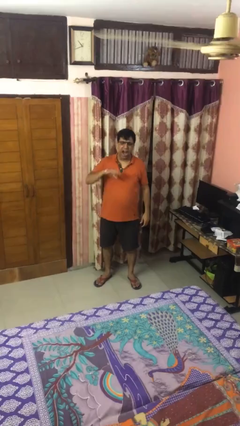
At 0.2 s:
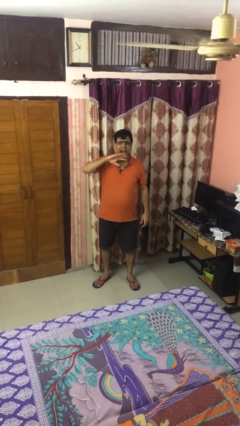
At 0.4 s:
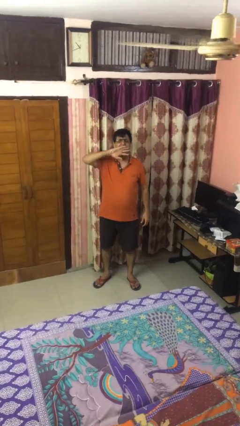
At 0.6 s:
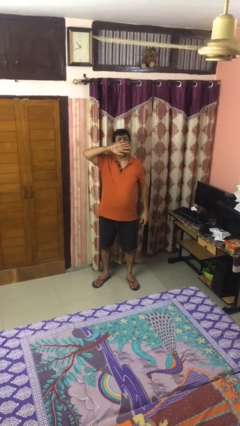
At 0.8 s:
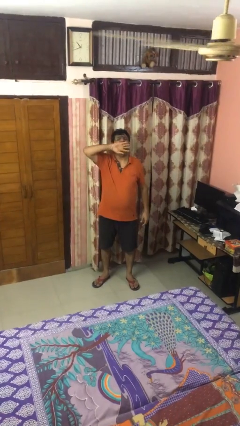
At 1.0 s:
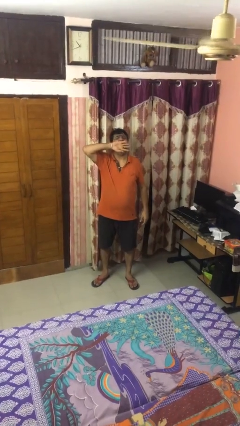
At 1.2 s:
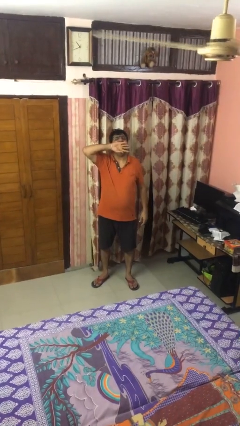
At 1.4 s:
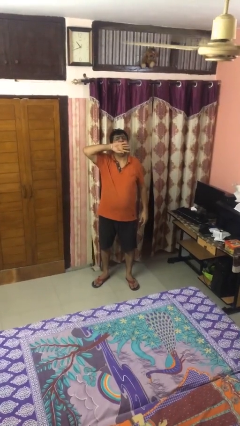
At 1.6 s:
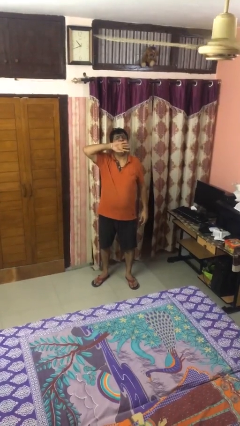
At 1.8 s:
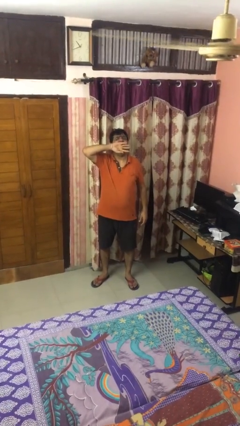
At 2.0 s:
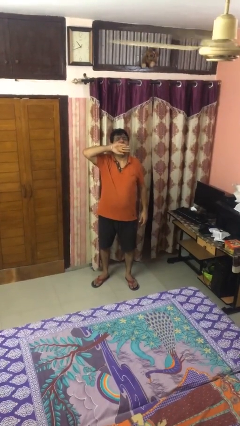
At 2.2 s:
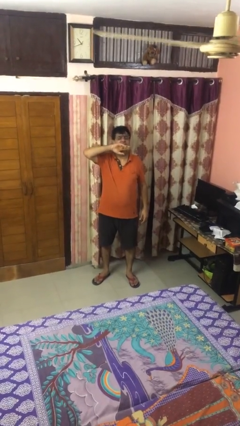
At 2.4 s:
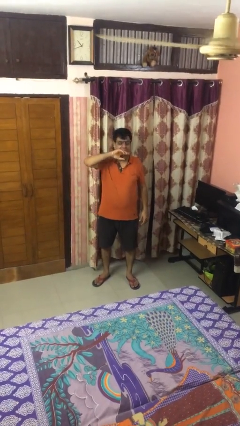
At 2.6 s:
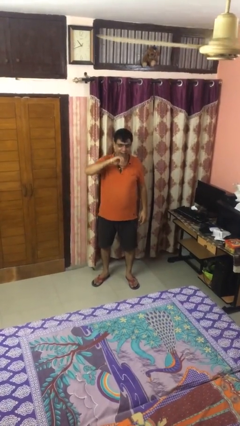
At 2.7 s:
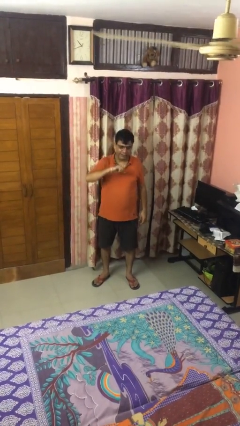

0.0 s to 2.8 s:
person yawns

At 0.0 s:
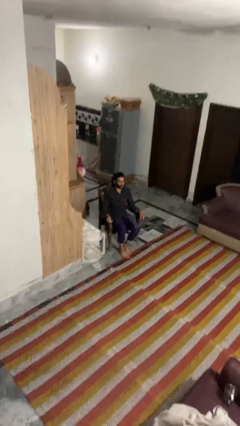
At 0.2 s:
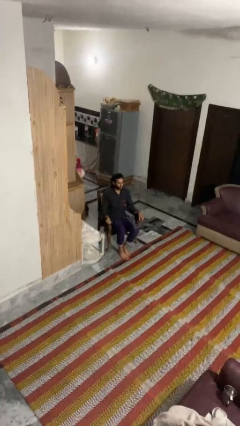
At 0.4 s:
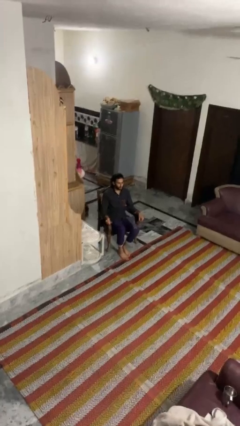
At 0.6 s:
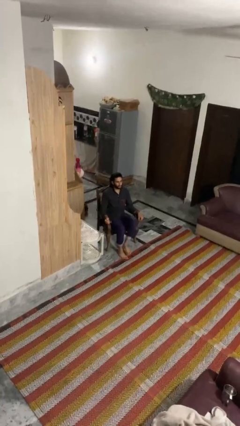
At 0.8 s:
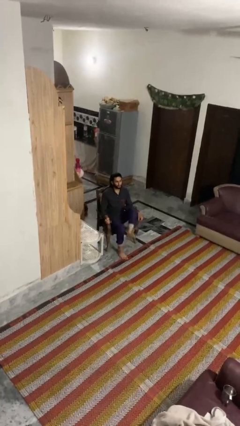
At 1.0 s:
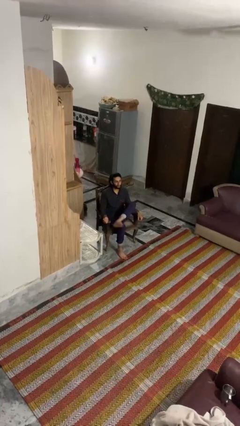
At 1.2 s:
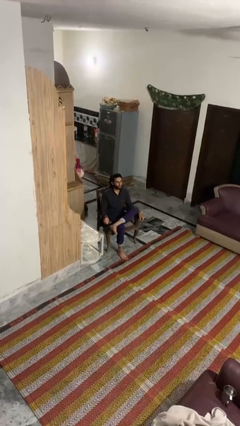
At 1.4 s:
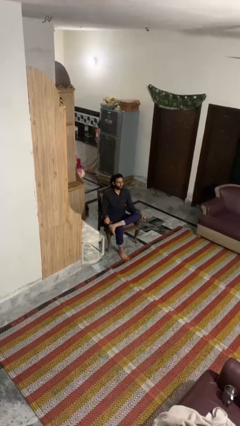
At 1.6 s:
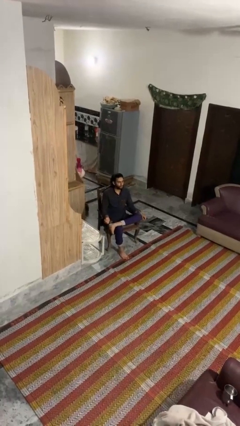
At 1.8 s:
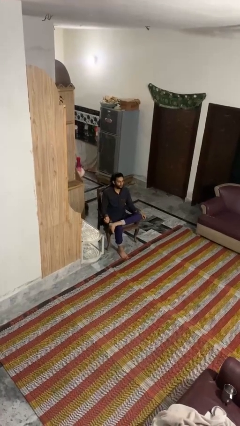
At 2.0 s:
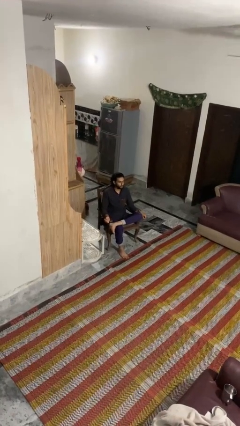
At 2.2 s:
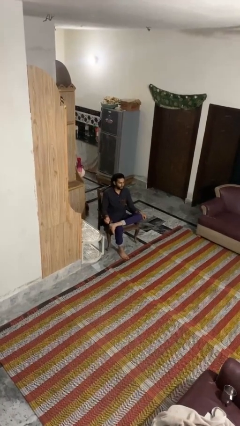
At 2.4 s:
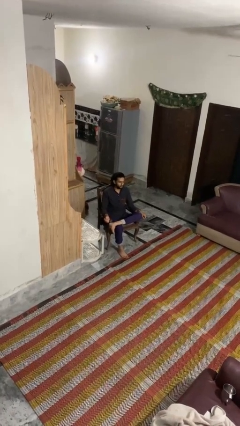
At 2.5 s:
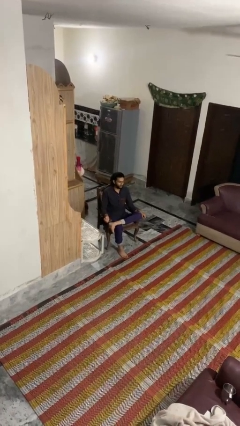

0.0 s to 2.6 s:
person crosses legs

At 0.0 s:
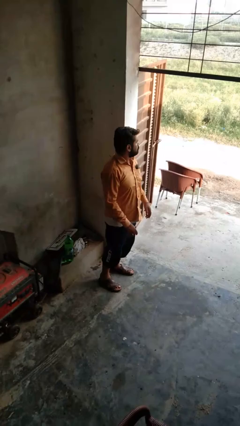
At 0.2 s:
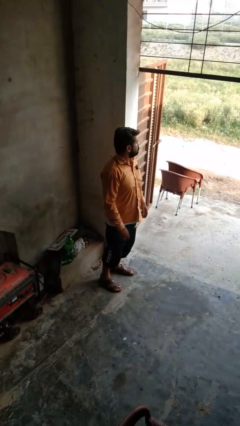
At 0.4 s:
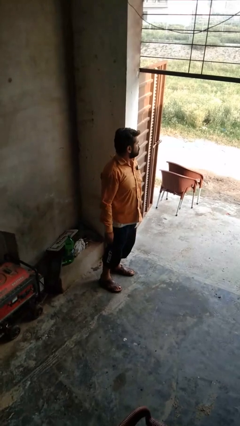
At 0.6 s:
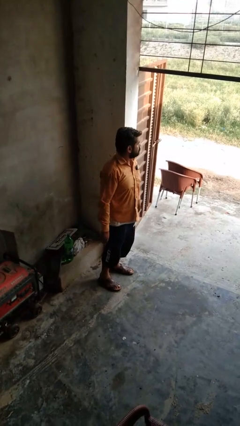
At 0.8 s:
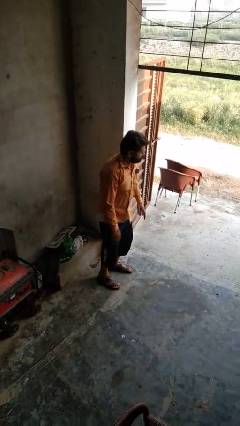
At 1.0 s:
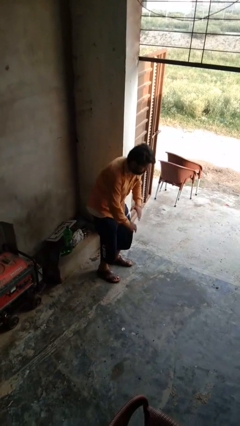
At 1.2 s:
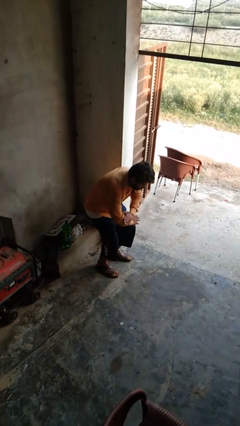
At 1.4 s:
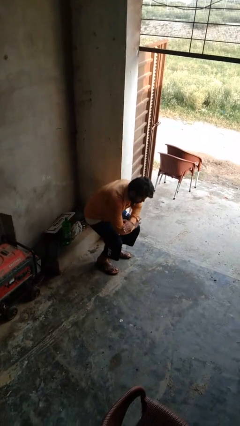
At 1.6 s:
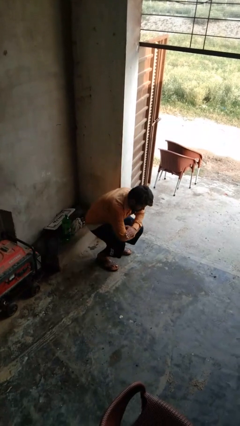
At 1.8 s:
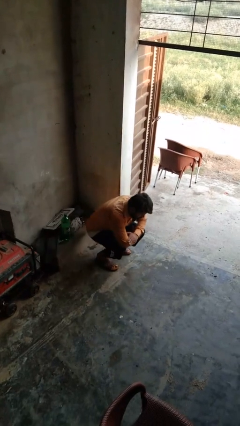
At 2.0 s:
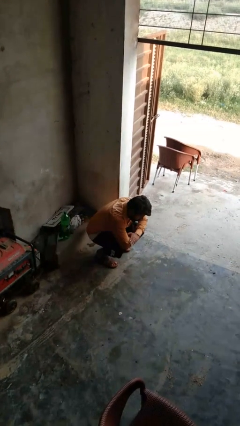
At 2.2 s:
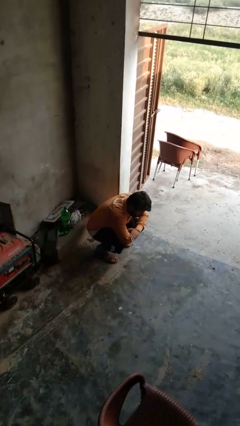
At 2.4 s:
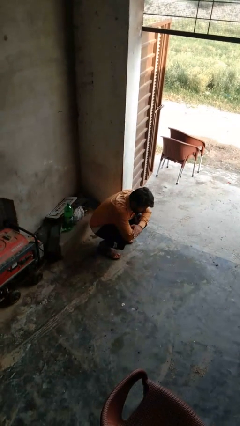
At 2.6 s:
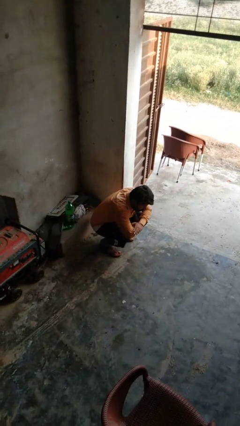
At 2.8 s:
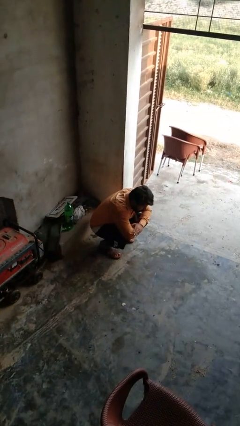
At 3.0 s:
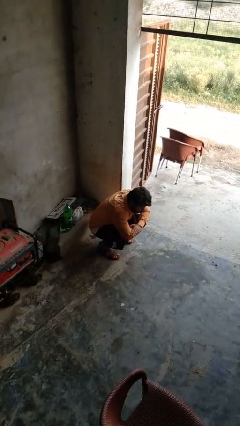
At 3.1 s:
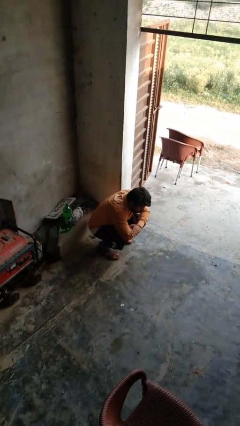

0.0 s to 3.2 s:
person squats

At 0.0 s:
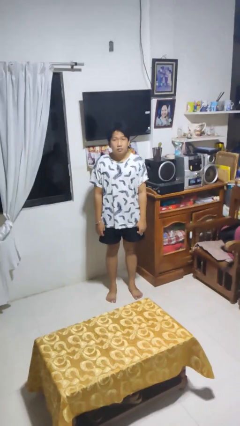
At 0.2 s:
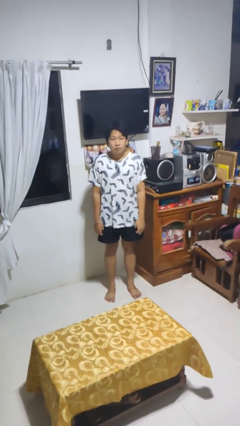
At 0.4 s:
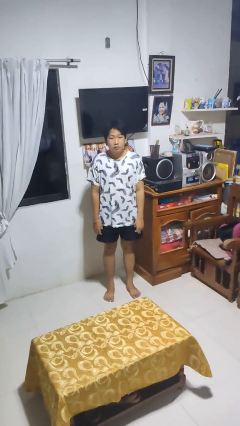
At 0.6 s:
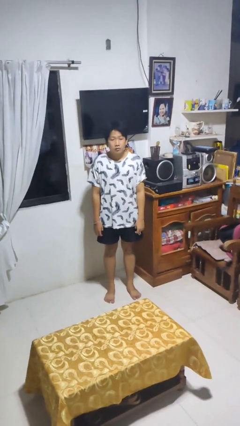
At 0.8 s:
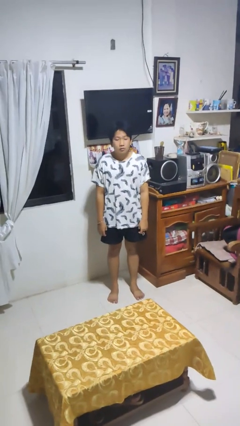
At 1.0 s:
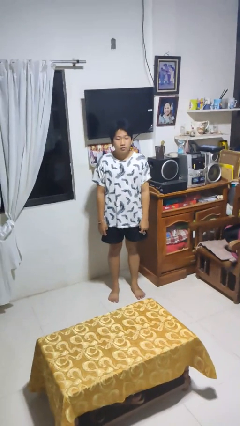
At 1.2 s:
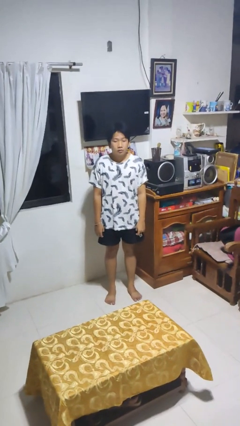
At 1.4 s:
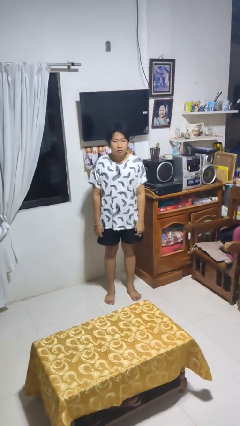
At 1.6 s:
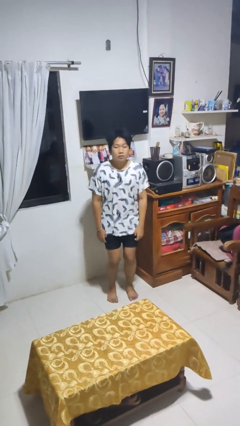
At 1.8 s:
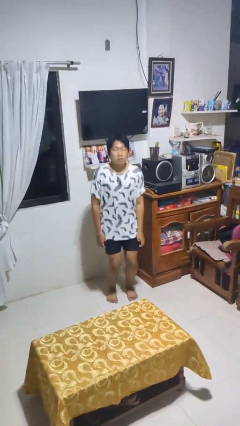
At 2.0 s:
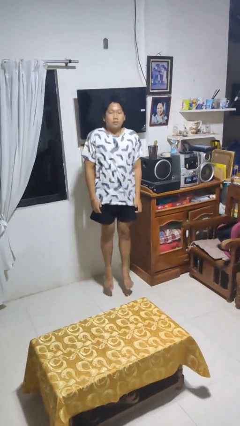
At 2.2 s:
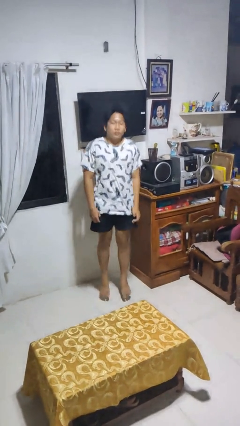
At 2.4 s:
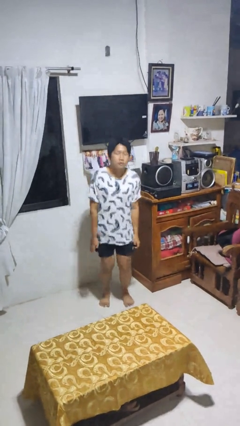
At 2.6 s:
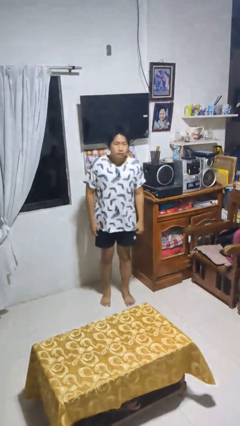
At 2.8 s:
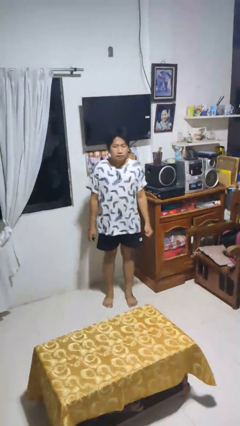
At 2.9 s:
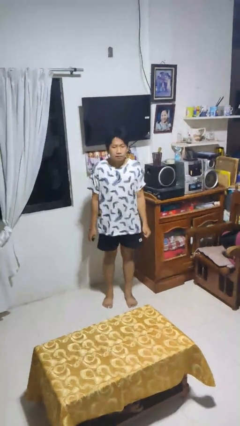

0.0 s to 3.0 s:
person jumps

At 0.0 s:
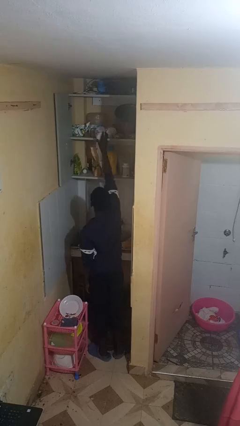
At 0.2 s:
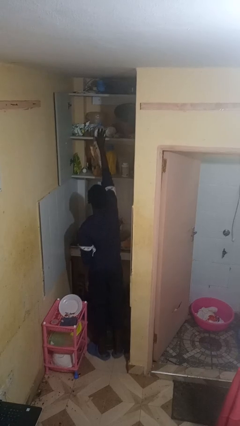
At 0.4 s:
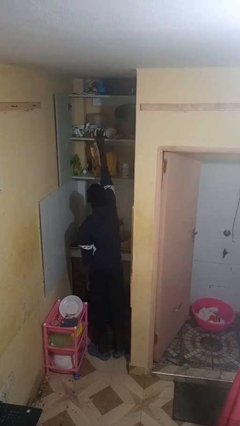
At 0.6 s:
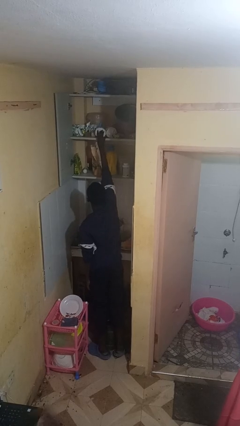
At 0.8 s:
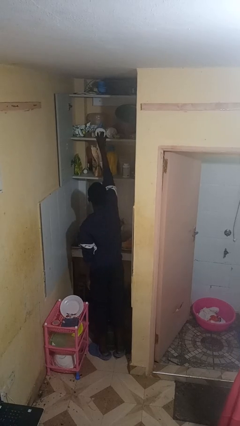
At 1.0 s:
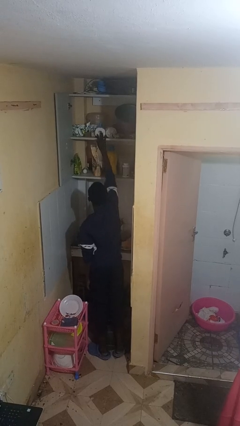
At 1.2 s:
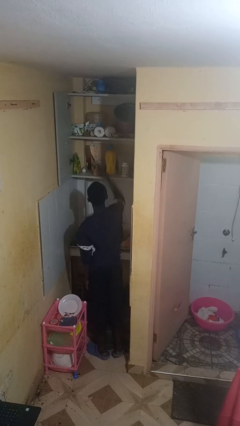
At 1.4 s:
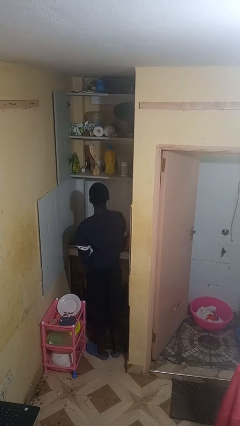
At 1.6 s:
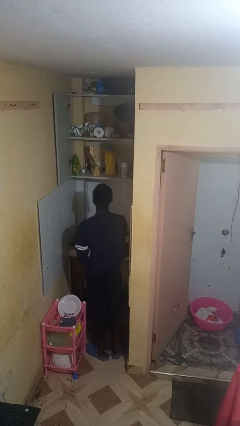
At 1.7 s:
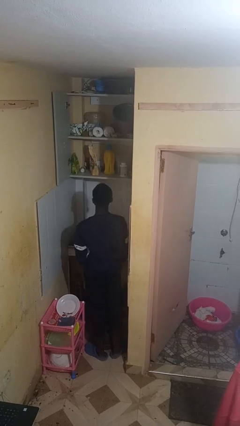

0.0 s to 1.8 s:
person puts object in cabinet

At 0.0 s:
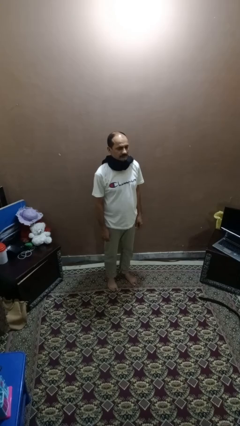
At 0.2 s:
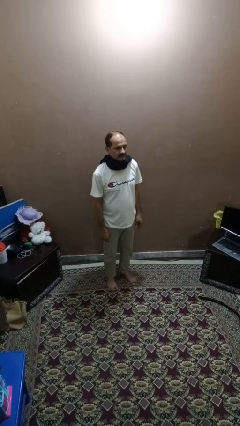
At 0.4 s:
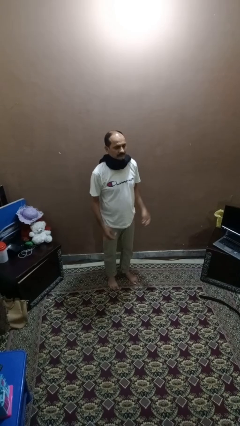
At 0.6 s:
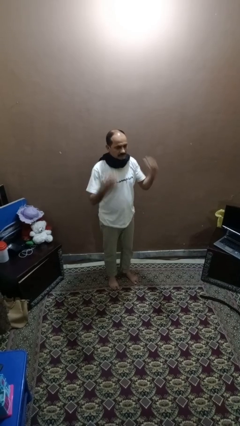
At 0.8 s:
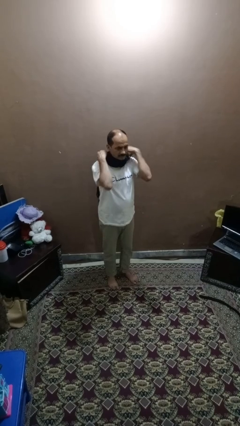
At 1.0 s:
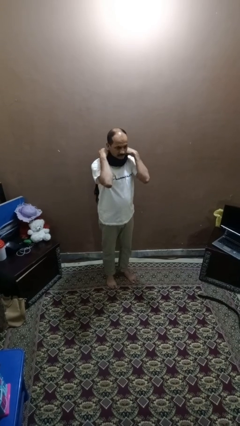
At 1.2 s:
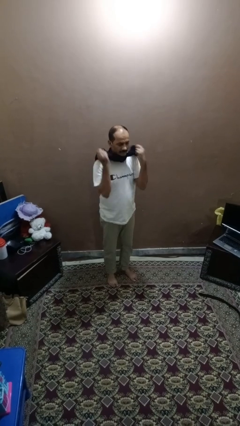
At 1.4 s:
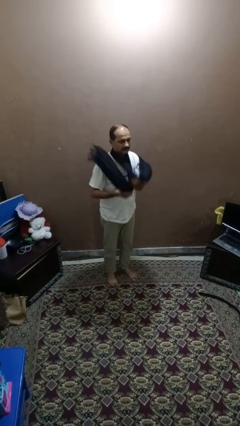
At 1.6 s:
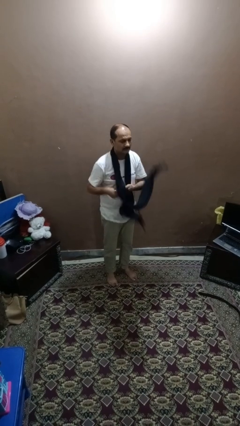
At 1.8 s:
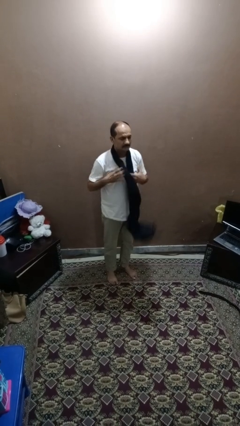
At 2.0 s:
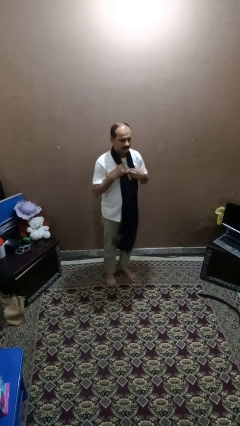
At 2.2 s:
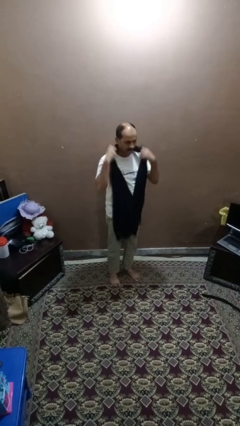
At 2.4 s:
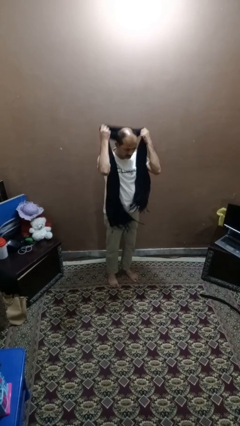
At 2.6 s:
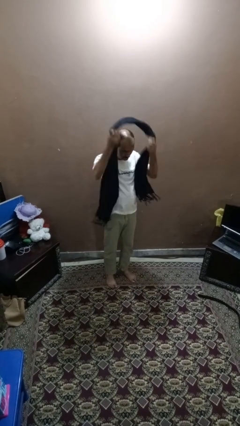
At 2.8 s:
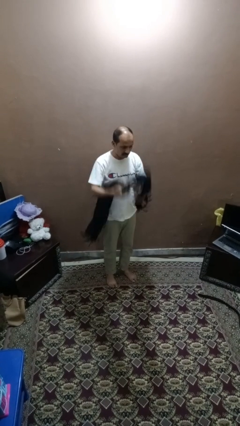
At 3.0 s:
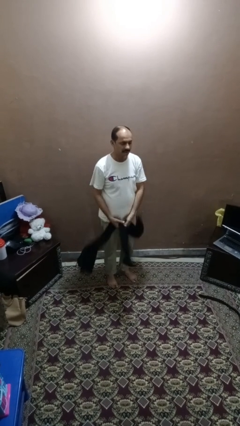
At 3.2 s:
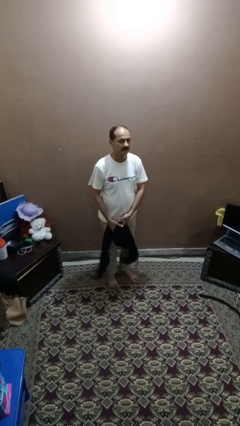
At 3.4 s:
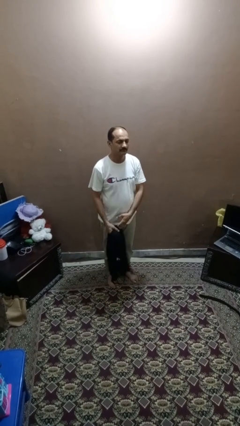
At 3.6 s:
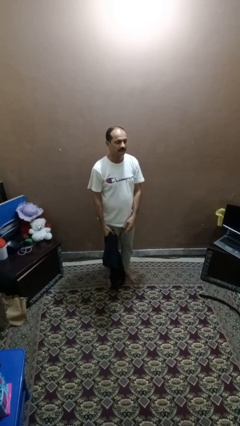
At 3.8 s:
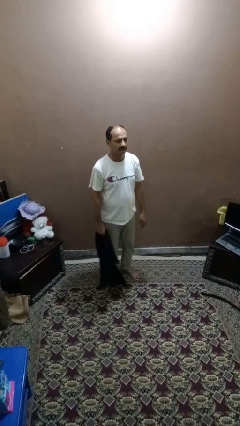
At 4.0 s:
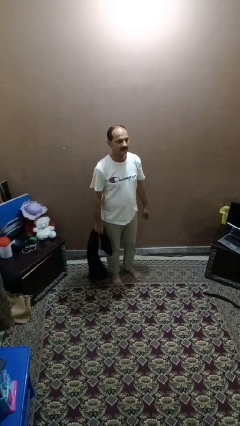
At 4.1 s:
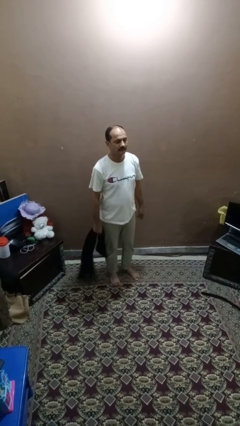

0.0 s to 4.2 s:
person takes off scarf
